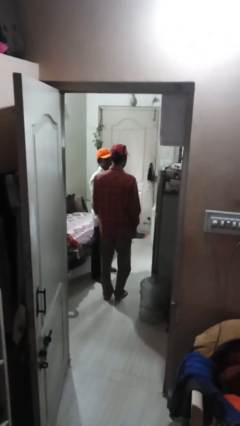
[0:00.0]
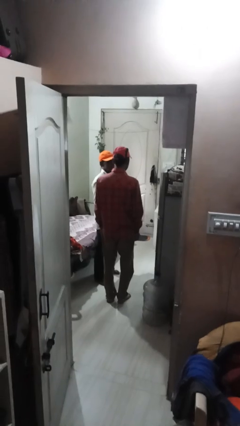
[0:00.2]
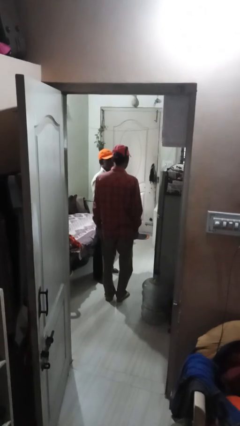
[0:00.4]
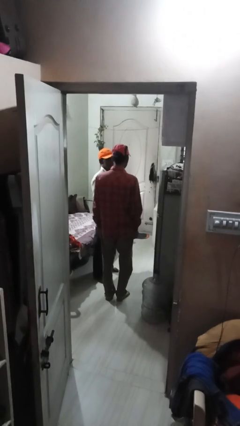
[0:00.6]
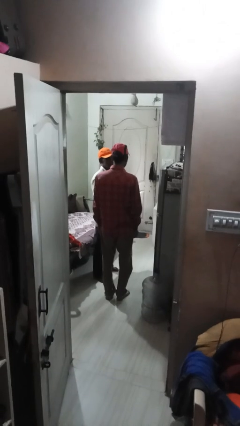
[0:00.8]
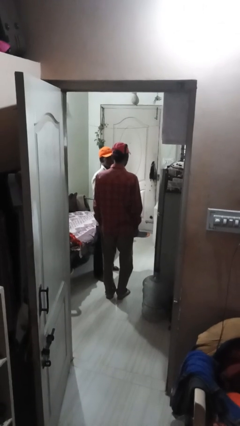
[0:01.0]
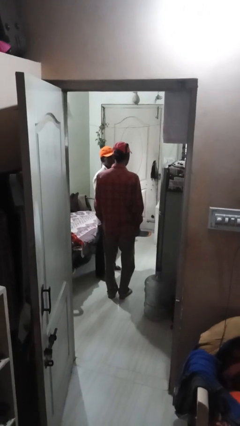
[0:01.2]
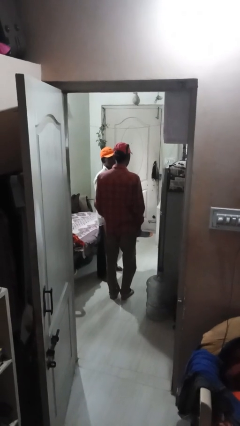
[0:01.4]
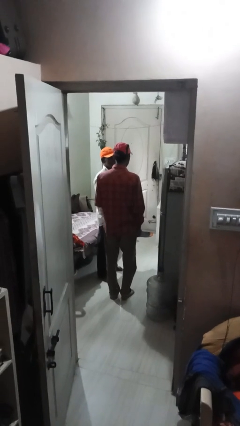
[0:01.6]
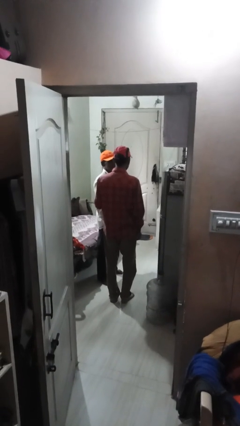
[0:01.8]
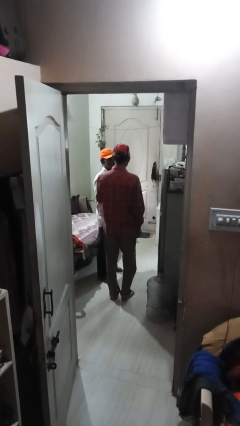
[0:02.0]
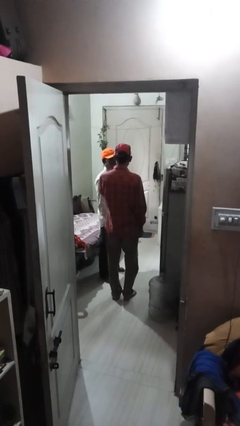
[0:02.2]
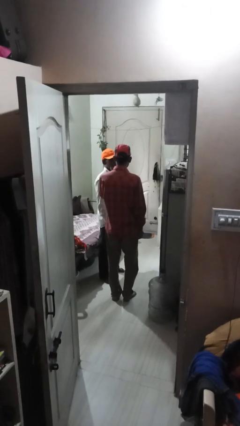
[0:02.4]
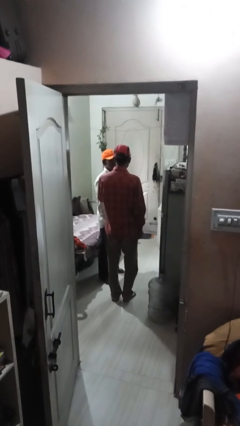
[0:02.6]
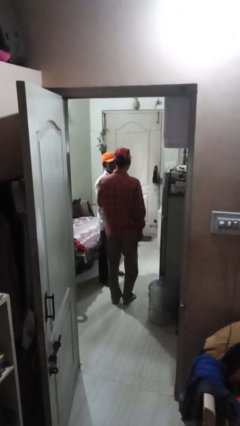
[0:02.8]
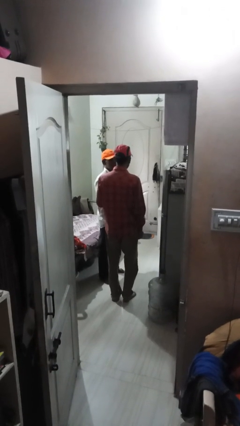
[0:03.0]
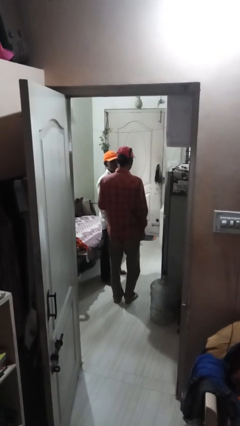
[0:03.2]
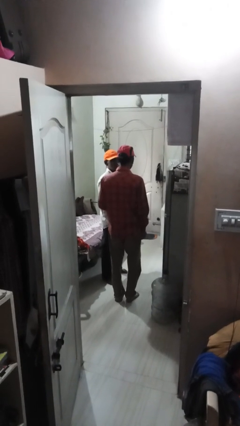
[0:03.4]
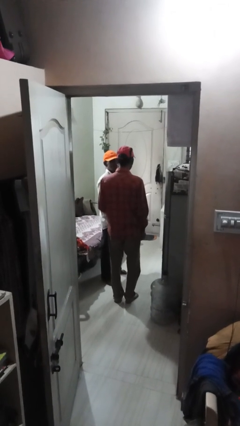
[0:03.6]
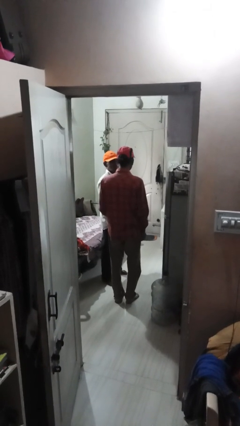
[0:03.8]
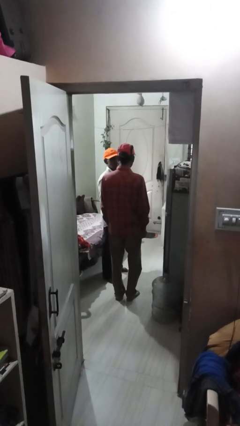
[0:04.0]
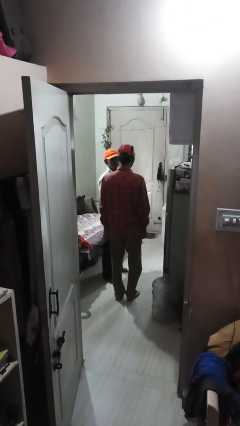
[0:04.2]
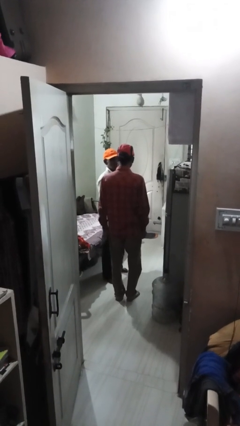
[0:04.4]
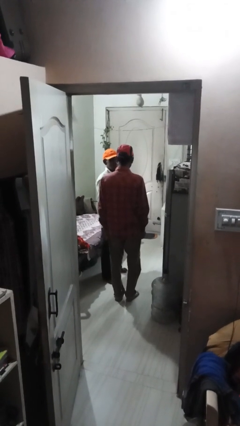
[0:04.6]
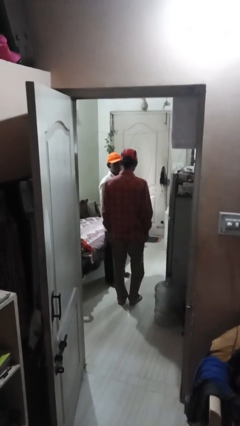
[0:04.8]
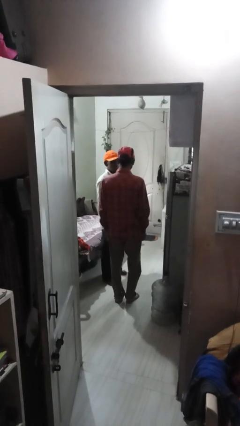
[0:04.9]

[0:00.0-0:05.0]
person touches face of person

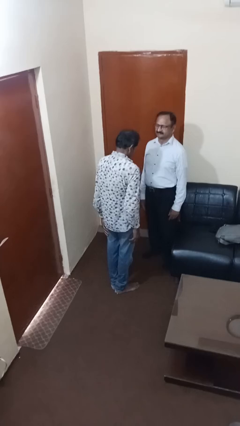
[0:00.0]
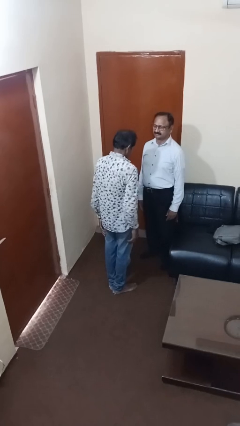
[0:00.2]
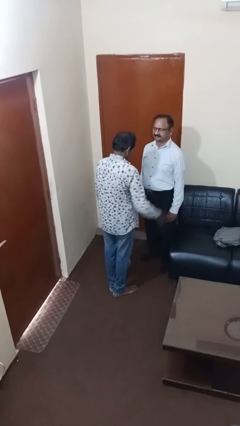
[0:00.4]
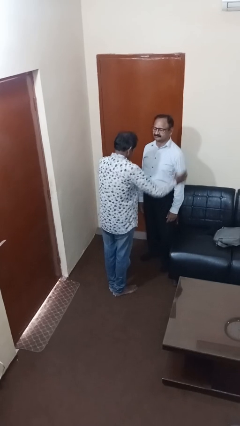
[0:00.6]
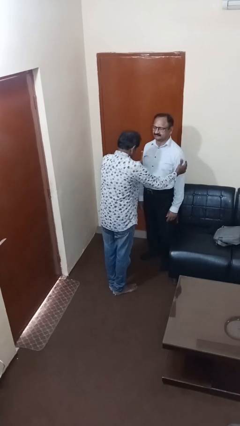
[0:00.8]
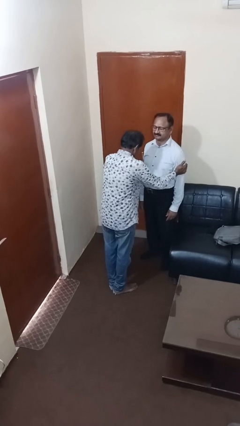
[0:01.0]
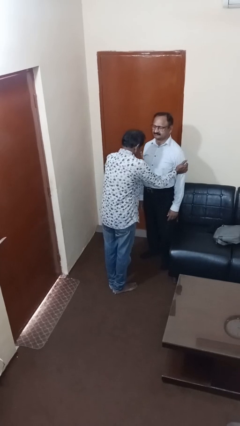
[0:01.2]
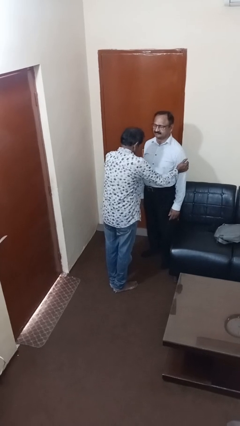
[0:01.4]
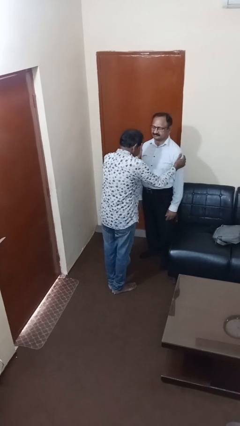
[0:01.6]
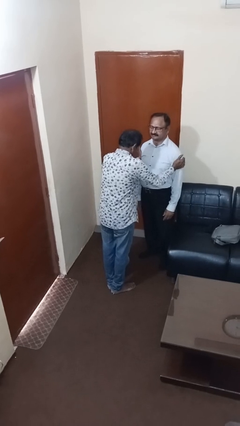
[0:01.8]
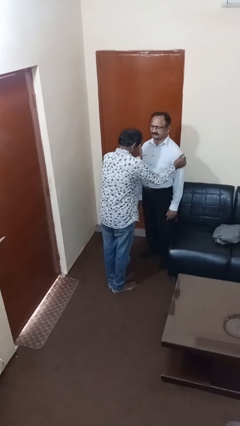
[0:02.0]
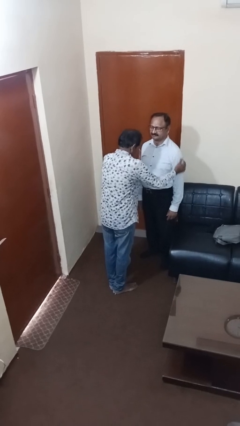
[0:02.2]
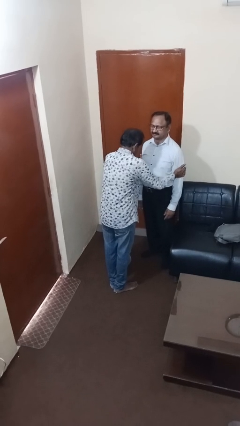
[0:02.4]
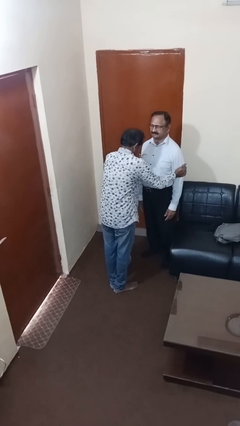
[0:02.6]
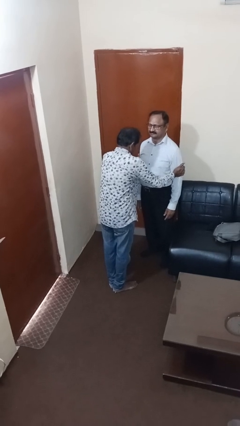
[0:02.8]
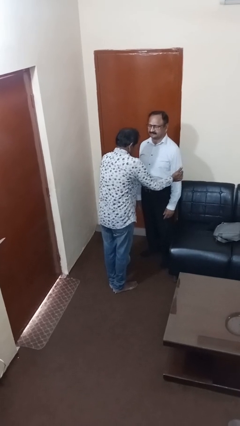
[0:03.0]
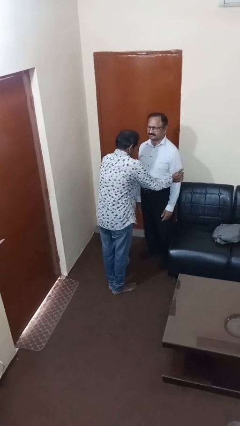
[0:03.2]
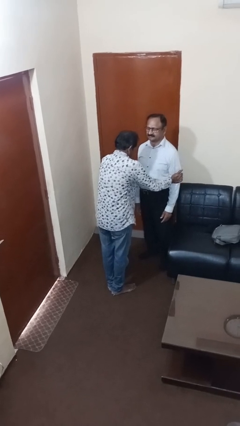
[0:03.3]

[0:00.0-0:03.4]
person grabs person by bicep

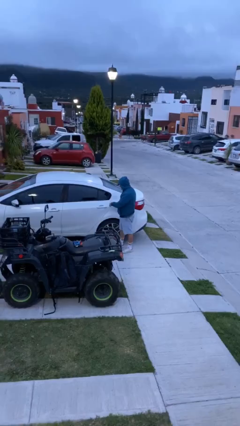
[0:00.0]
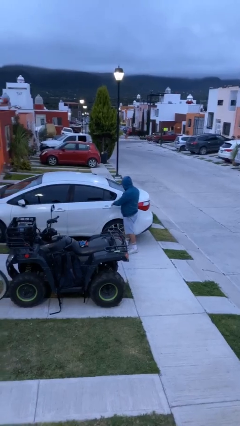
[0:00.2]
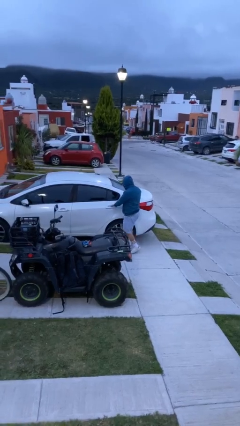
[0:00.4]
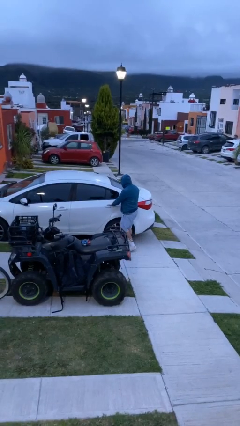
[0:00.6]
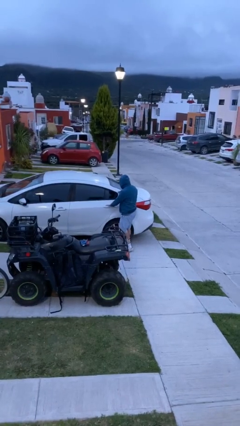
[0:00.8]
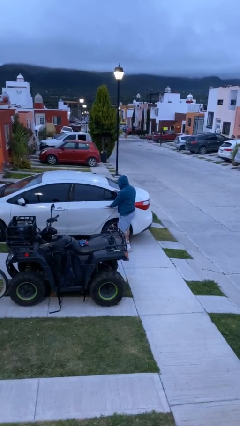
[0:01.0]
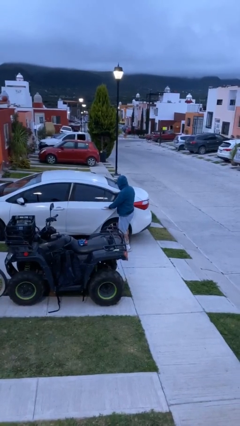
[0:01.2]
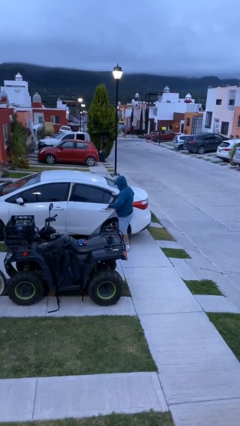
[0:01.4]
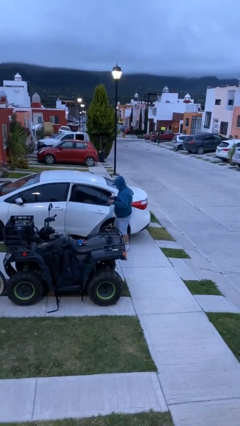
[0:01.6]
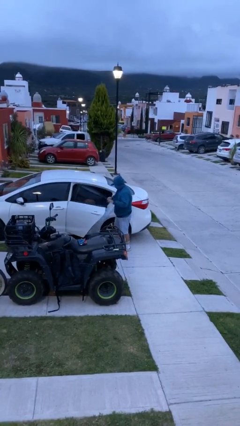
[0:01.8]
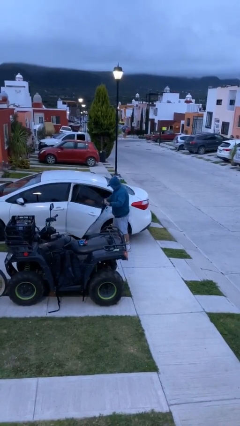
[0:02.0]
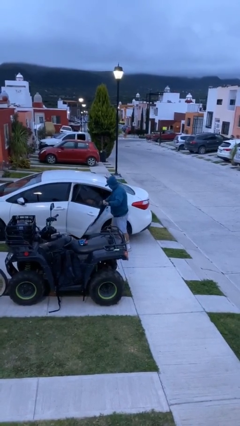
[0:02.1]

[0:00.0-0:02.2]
person opens car door

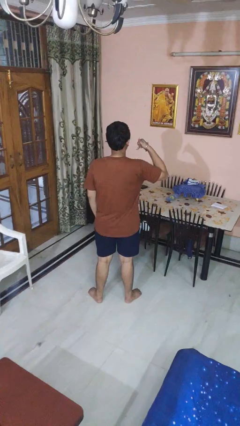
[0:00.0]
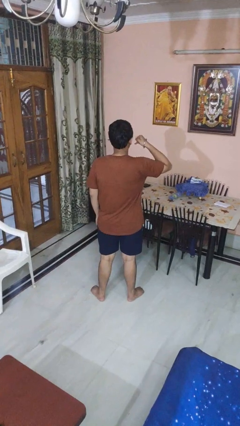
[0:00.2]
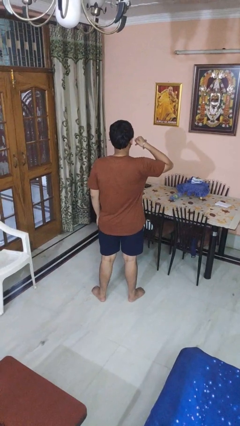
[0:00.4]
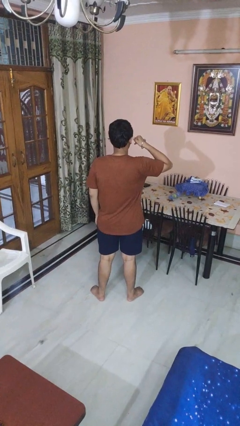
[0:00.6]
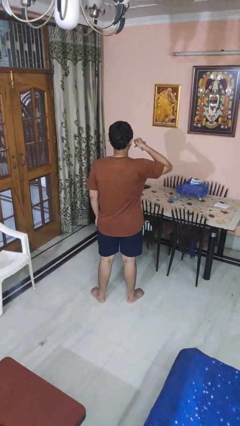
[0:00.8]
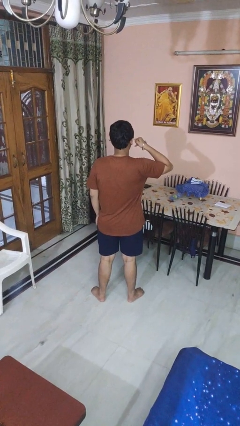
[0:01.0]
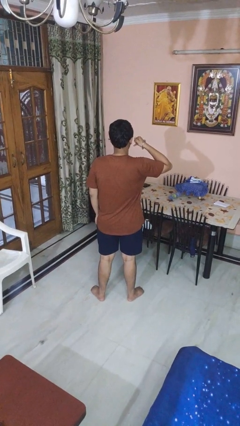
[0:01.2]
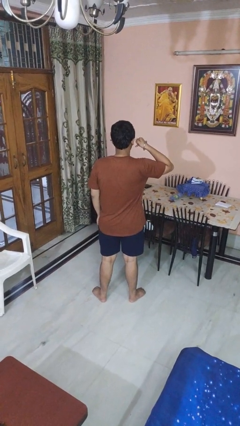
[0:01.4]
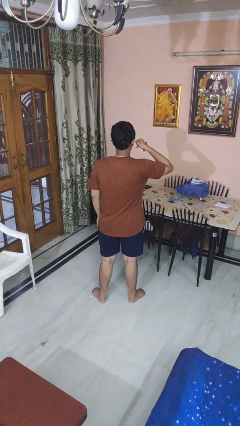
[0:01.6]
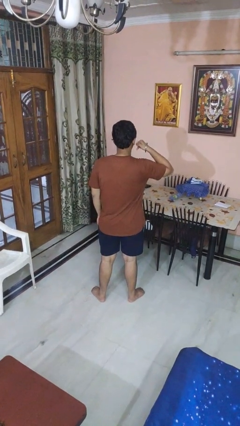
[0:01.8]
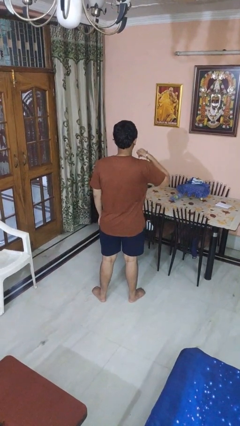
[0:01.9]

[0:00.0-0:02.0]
person gestures call me

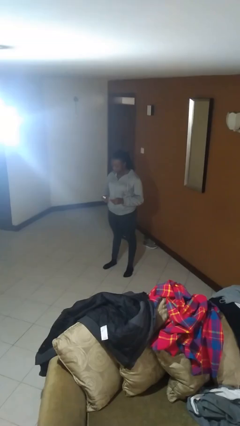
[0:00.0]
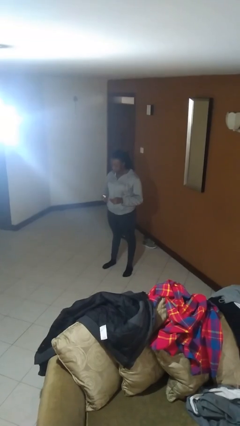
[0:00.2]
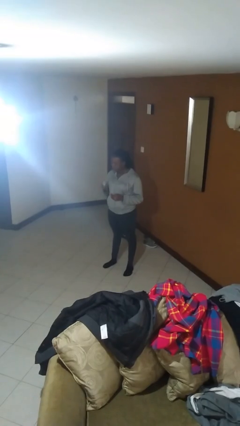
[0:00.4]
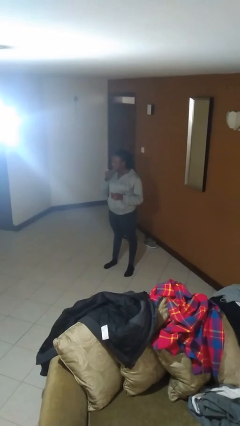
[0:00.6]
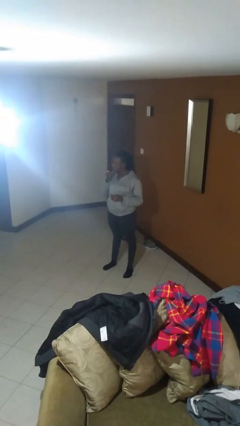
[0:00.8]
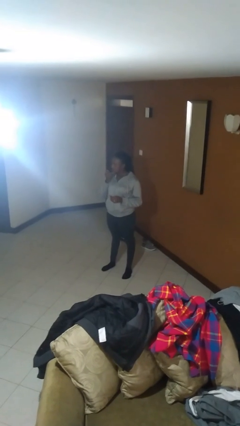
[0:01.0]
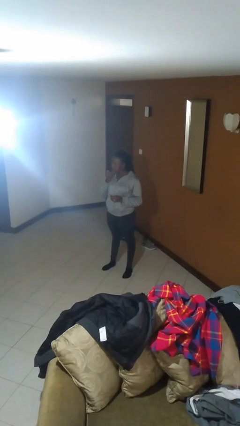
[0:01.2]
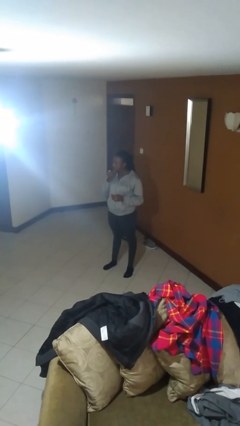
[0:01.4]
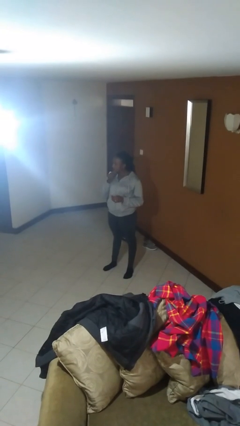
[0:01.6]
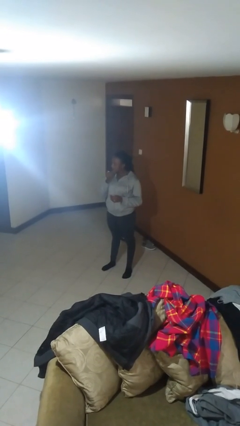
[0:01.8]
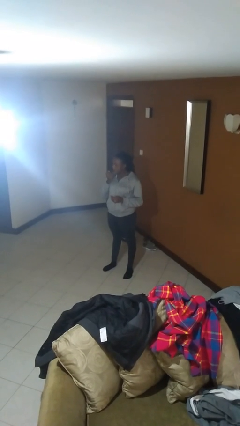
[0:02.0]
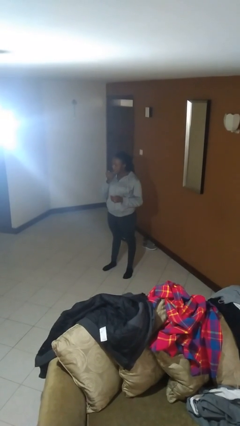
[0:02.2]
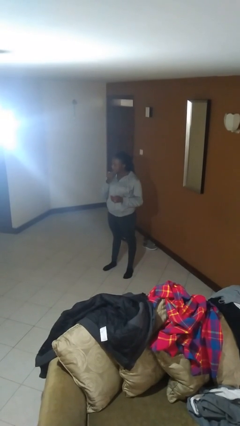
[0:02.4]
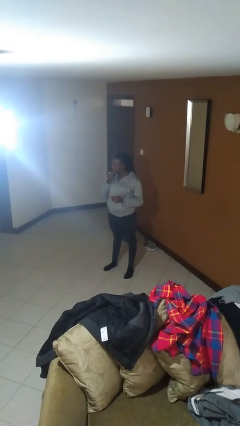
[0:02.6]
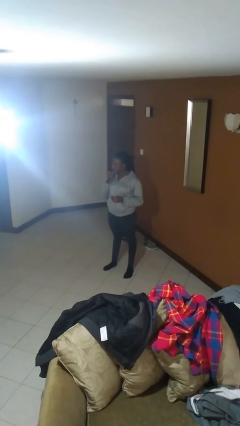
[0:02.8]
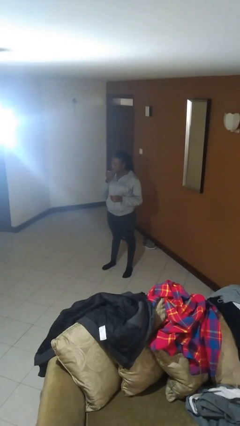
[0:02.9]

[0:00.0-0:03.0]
person applies lip makeup

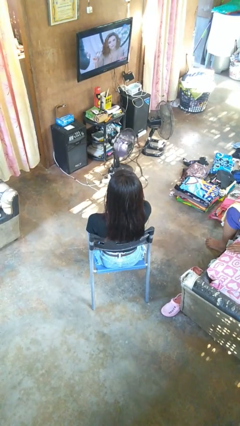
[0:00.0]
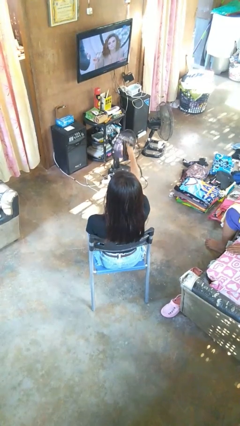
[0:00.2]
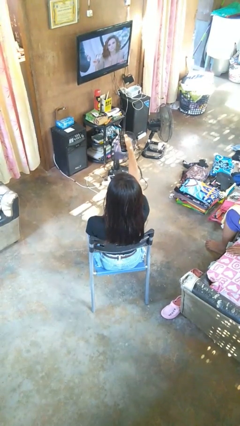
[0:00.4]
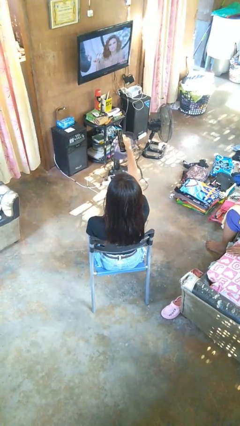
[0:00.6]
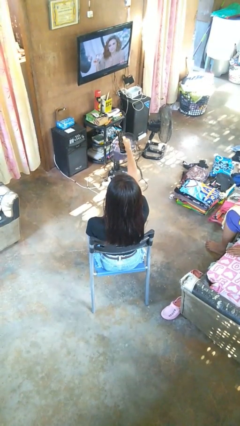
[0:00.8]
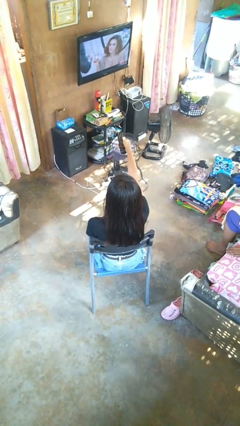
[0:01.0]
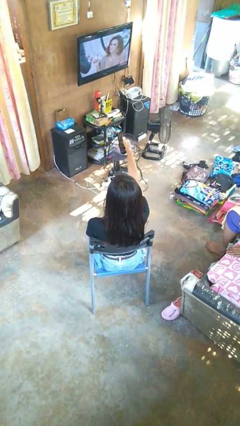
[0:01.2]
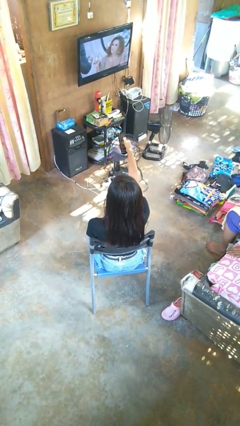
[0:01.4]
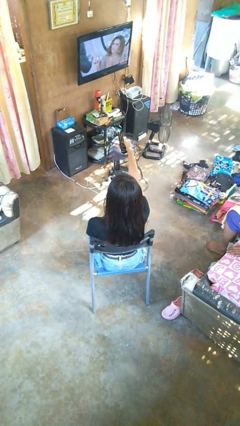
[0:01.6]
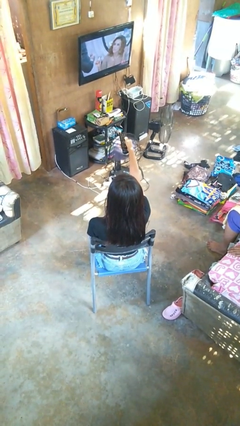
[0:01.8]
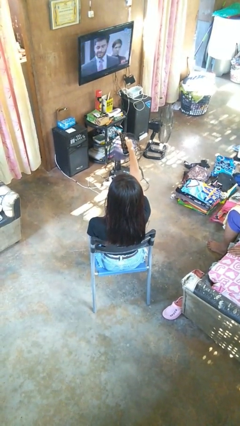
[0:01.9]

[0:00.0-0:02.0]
person uses television remote
